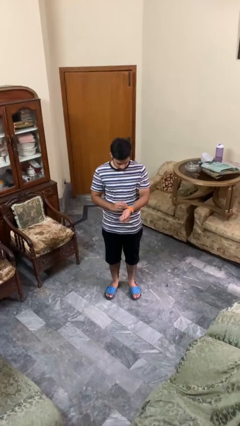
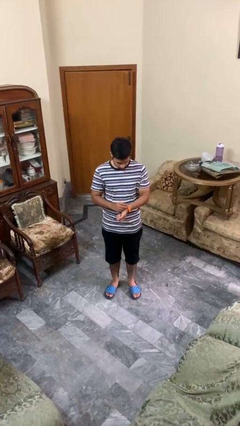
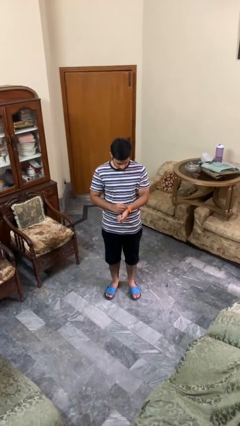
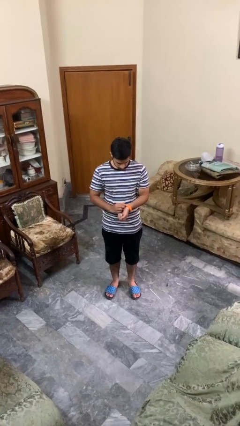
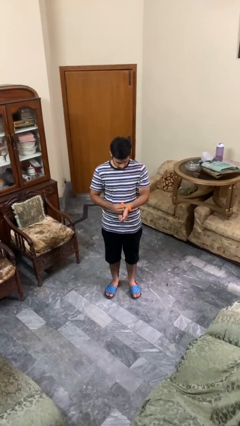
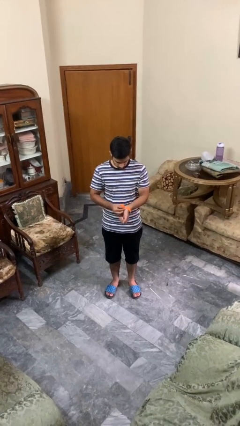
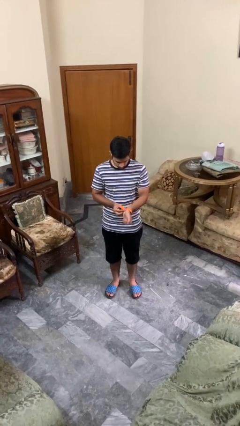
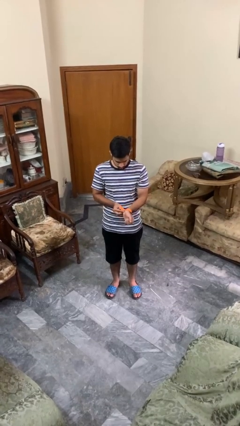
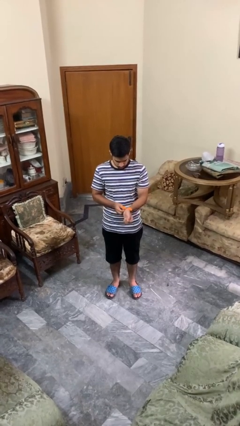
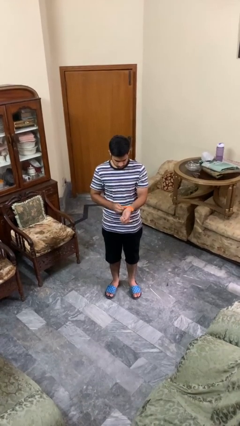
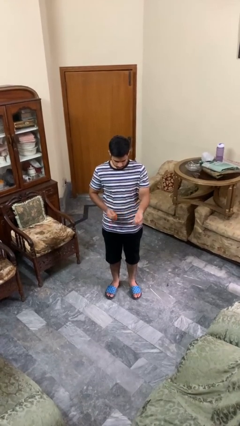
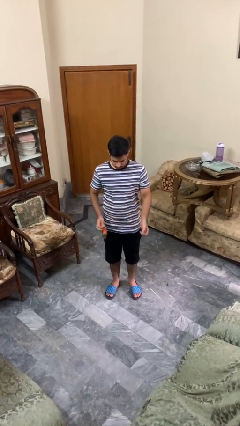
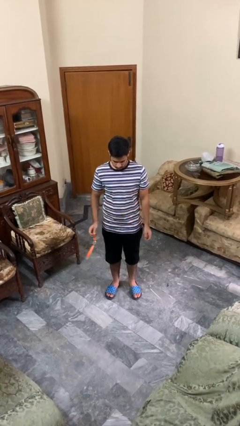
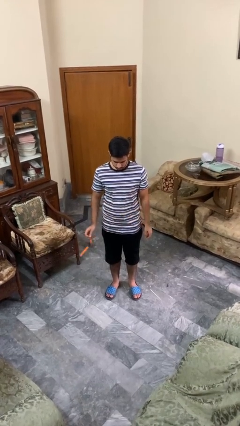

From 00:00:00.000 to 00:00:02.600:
person takes off wristwatch

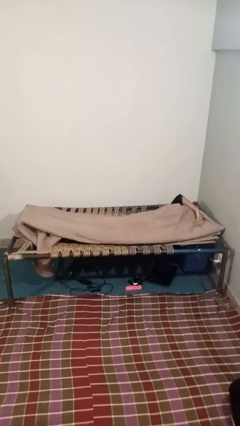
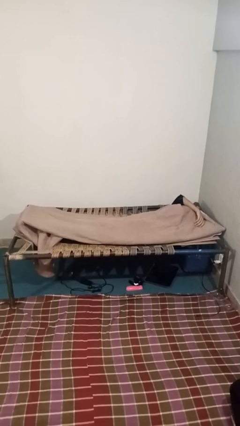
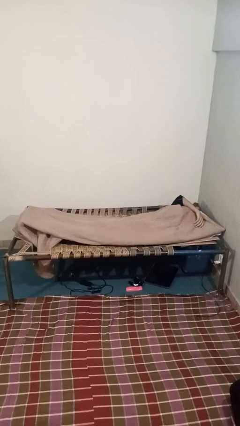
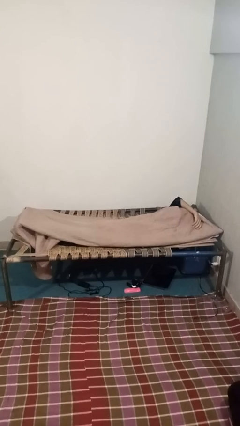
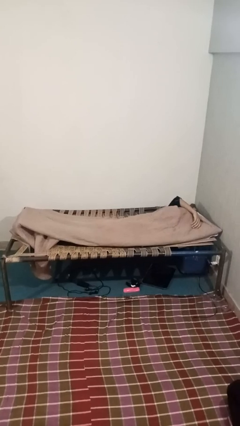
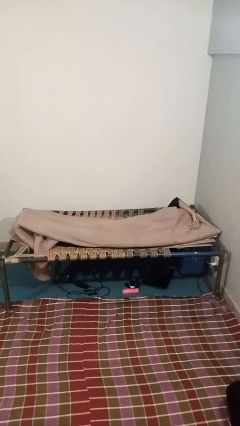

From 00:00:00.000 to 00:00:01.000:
person covers with blanket

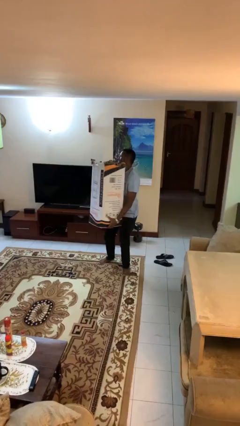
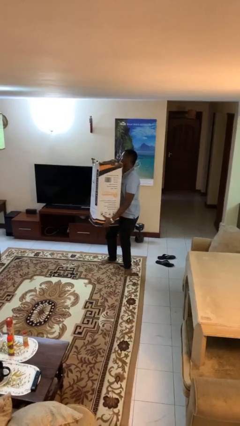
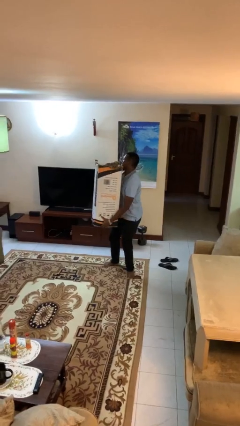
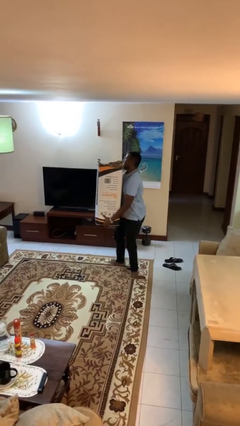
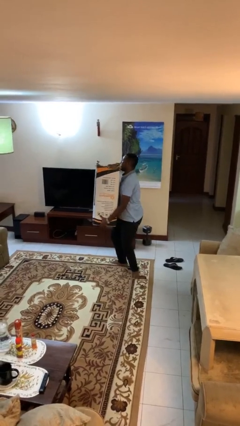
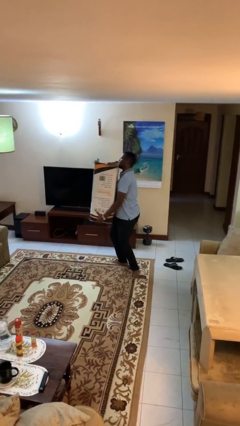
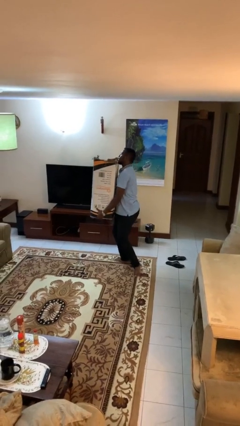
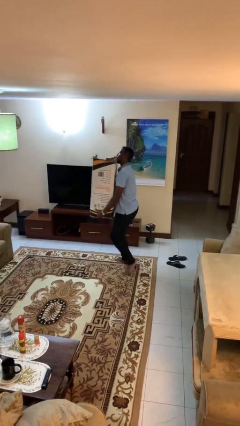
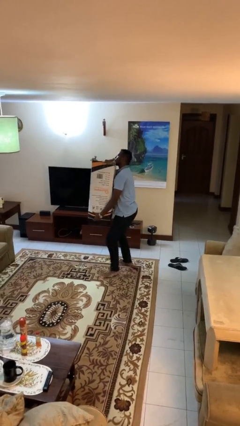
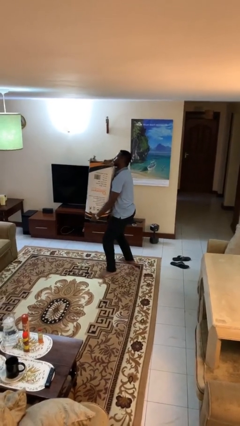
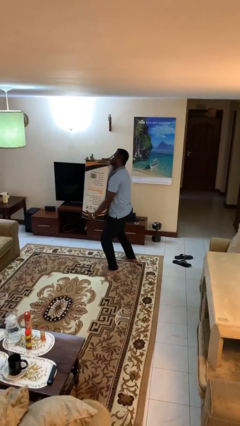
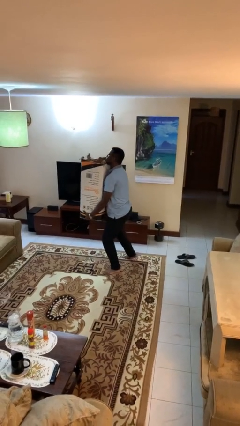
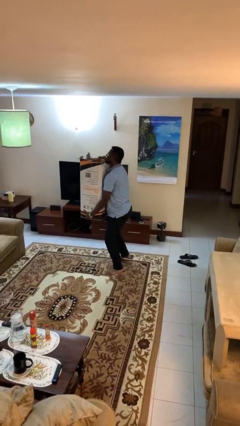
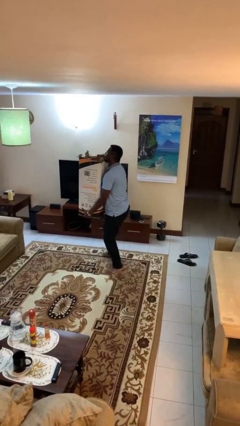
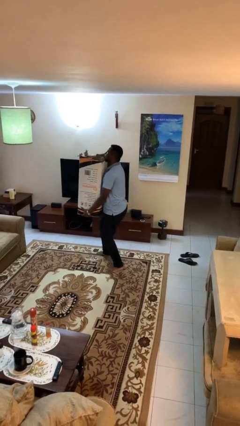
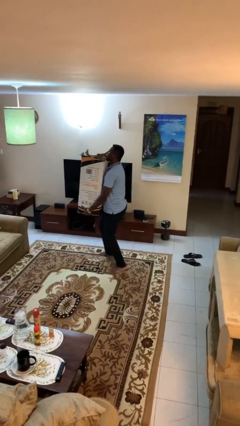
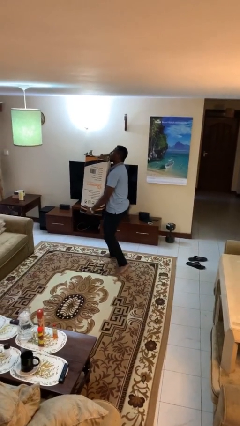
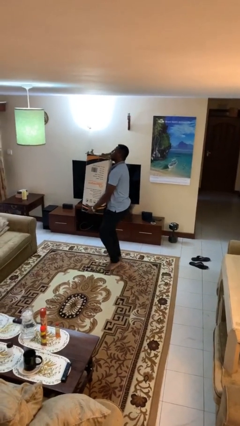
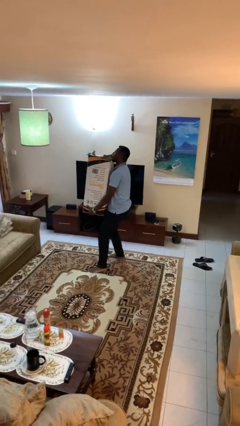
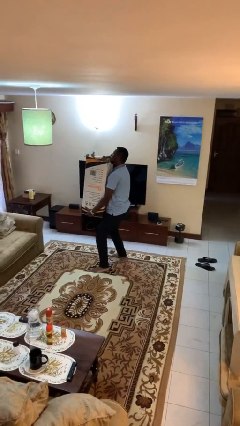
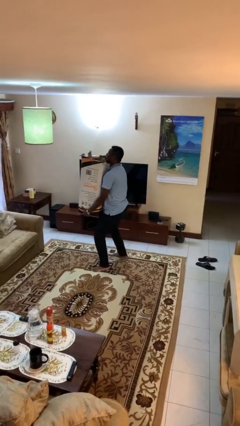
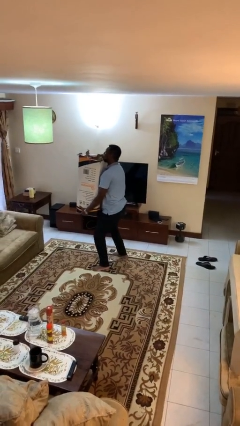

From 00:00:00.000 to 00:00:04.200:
person carries heavy object

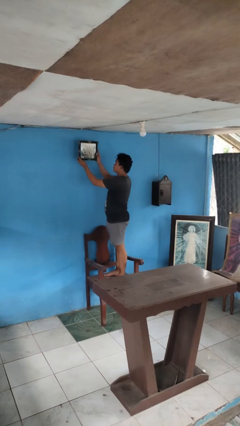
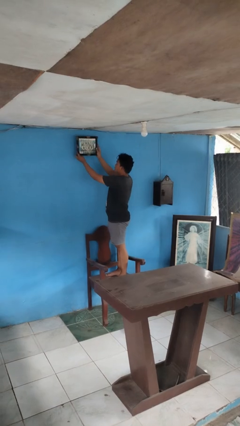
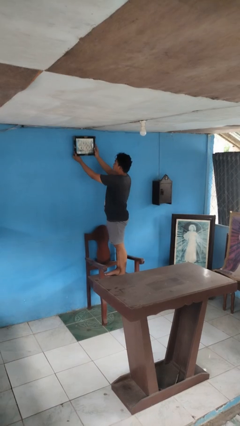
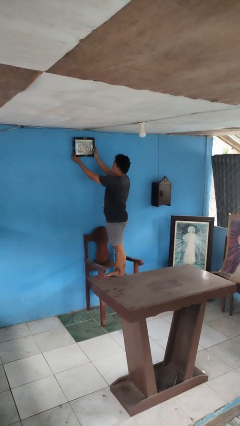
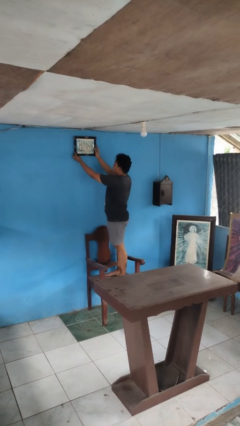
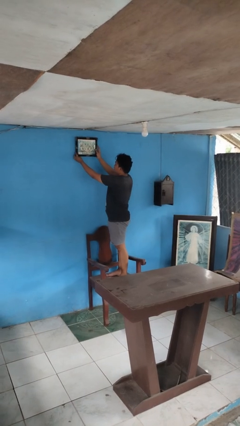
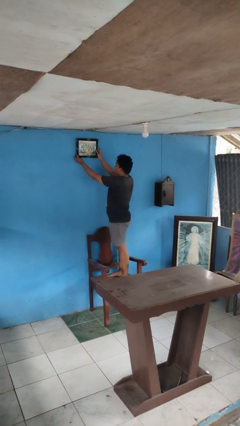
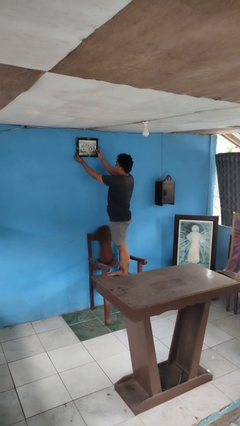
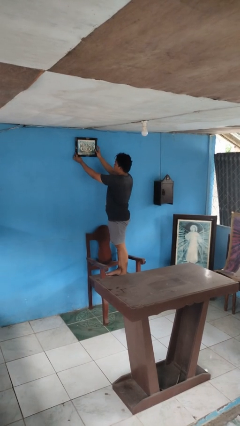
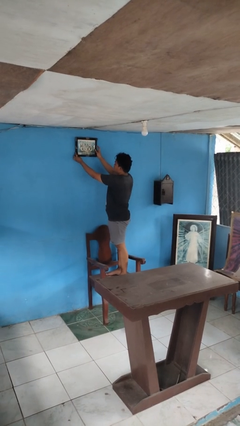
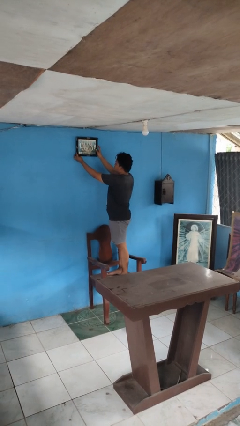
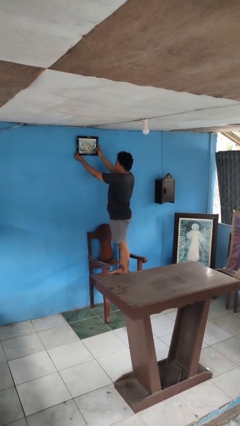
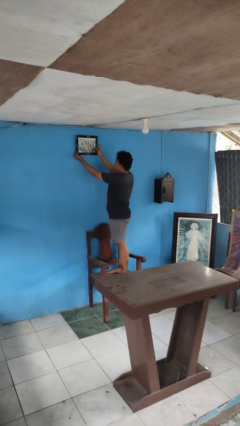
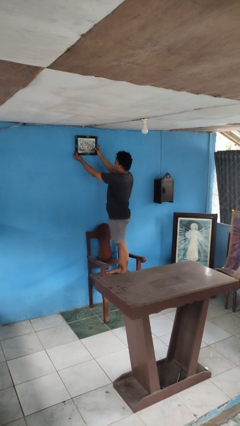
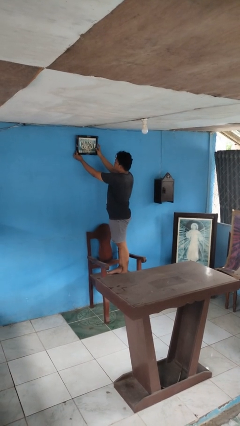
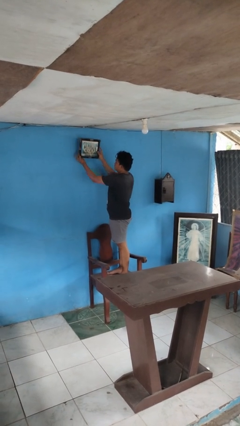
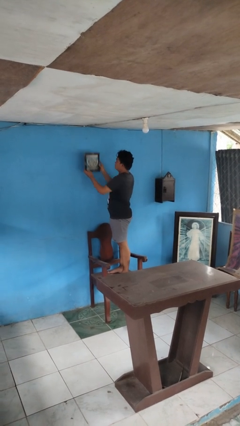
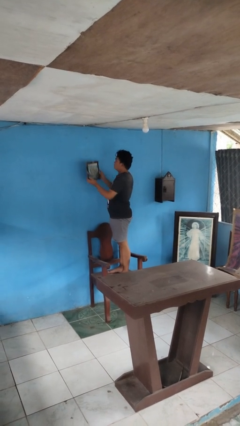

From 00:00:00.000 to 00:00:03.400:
person puts up picture frame

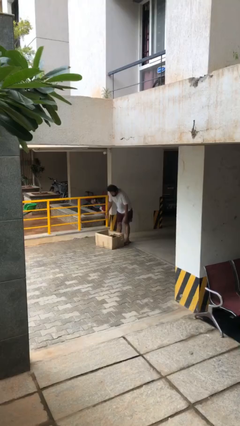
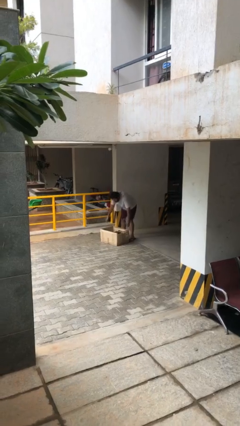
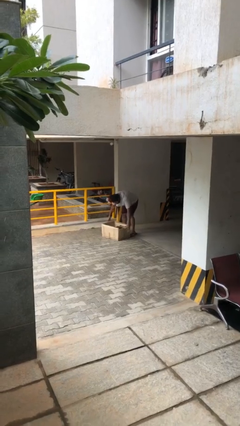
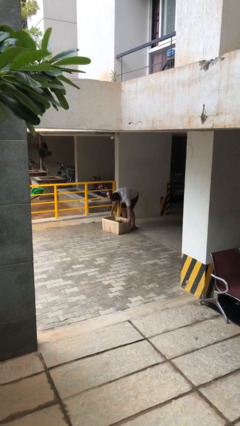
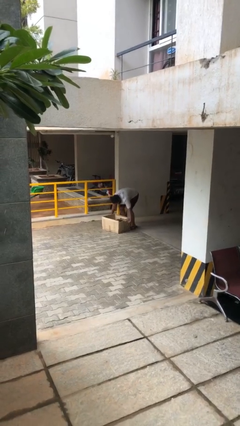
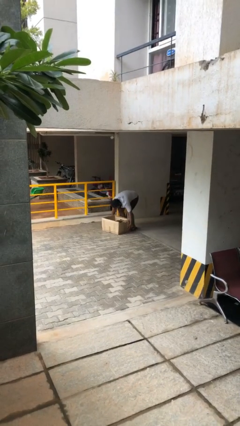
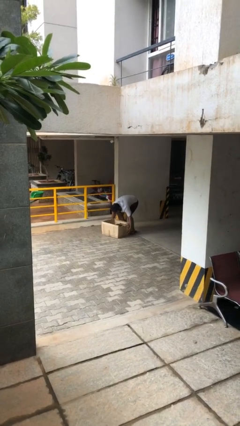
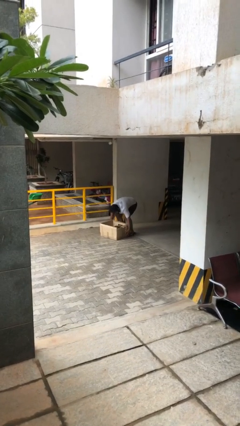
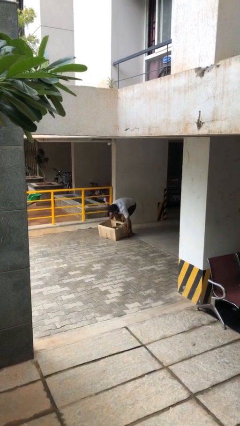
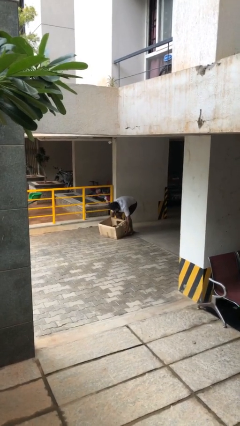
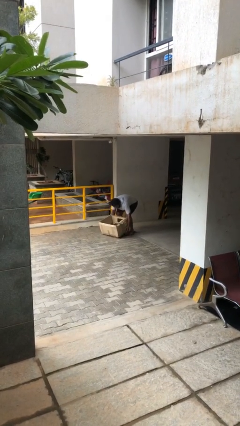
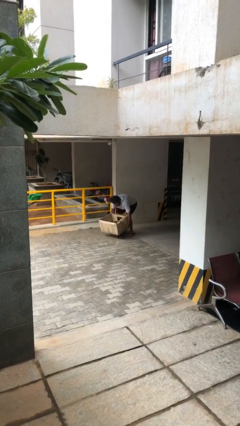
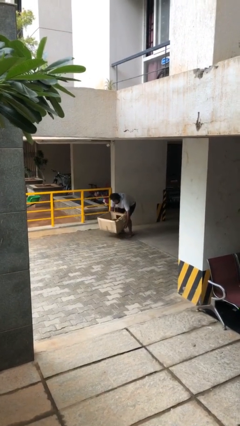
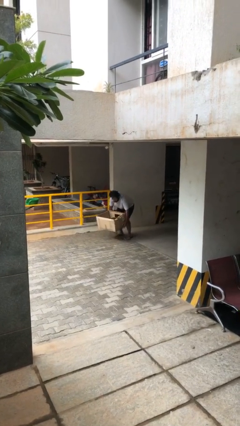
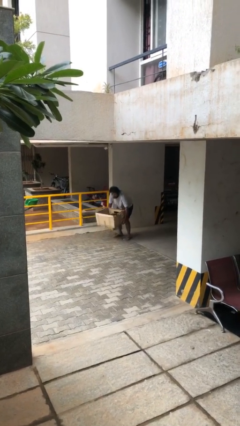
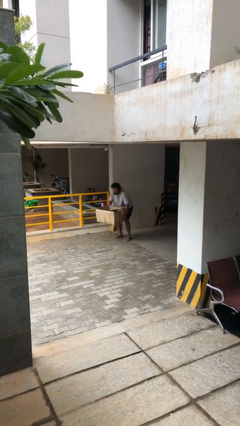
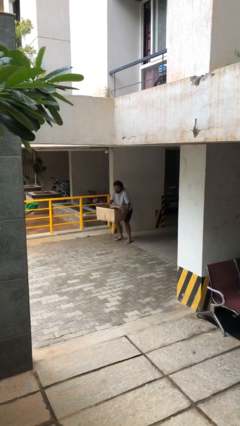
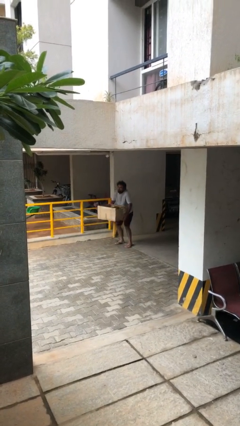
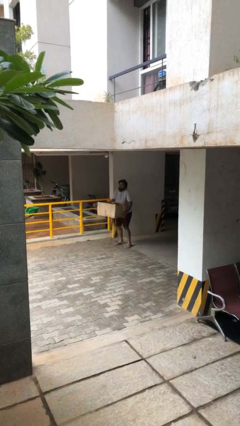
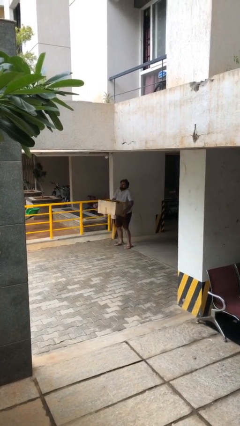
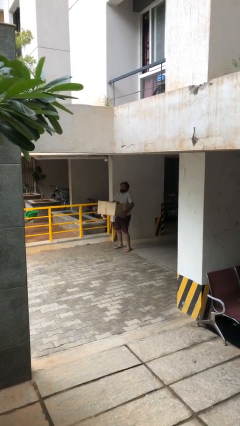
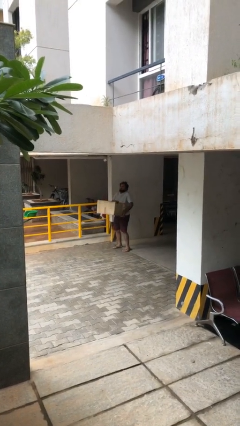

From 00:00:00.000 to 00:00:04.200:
person picks up object from floor

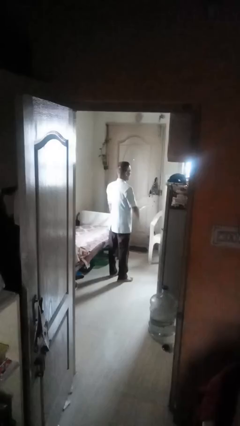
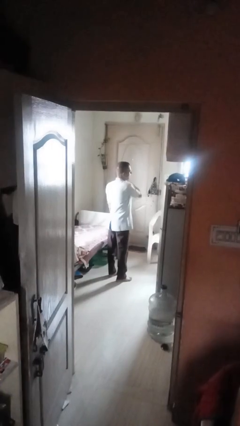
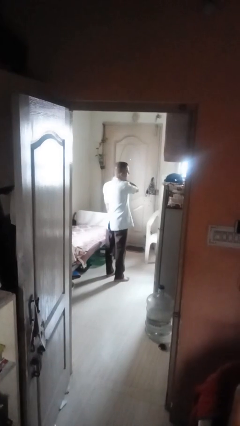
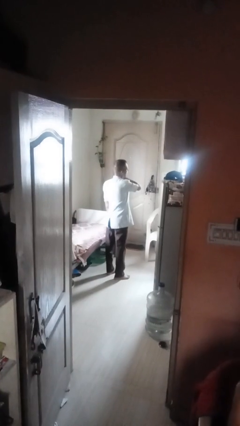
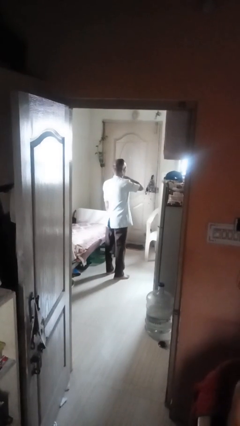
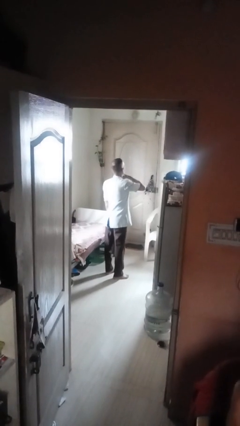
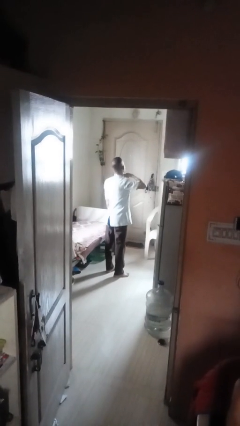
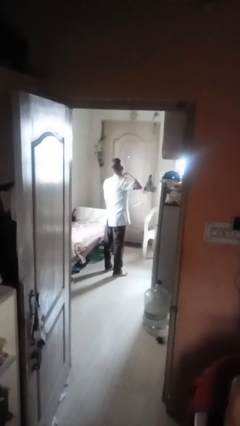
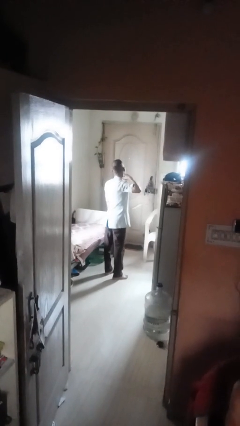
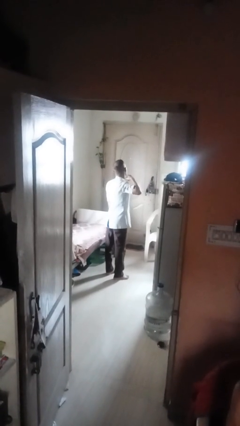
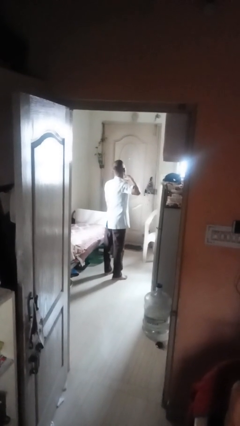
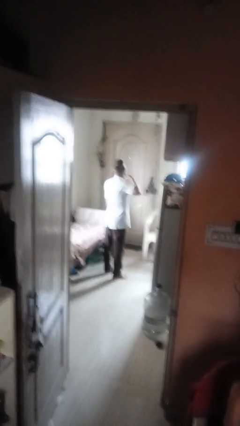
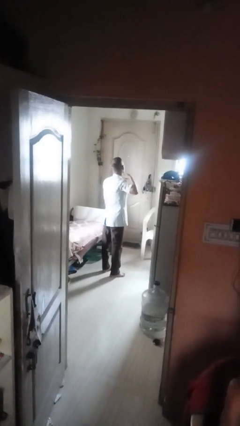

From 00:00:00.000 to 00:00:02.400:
person gestures cut
